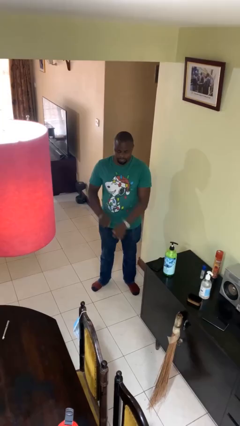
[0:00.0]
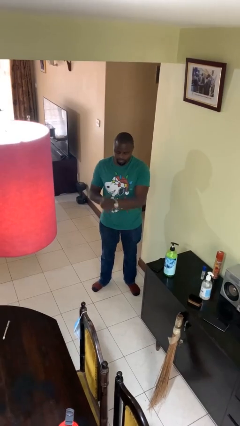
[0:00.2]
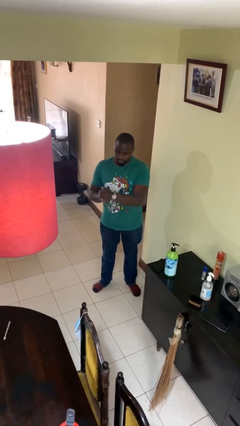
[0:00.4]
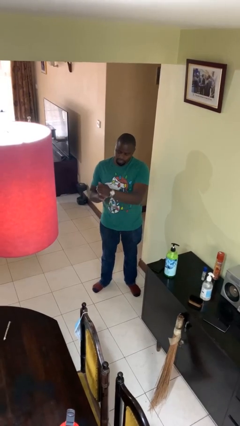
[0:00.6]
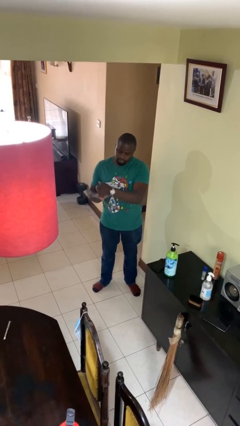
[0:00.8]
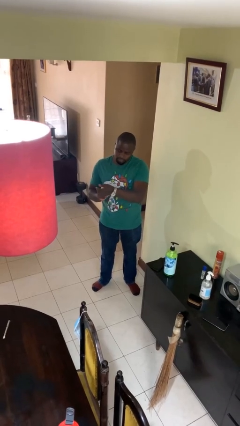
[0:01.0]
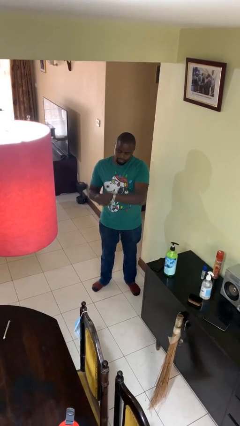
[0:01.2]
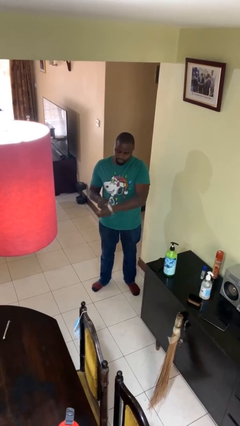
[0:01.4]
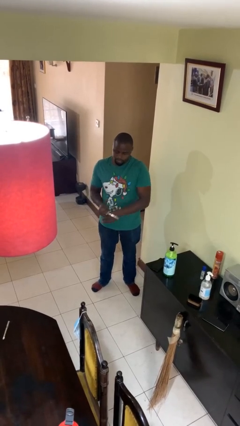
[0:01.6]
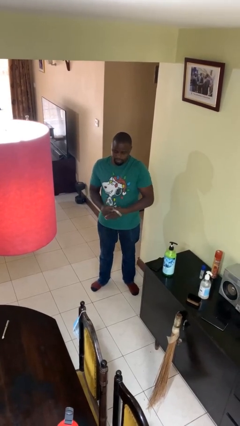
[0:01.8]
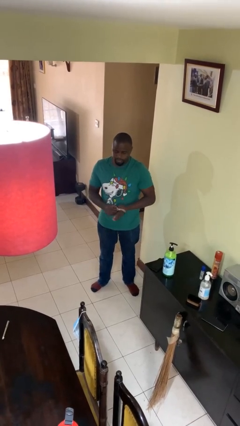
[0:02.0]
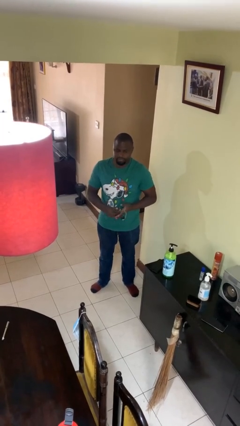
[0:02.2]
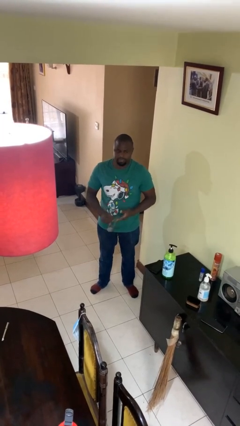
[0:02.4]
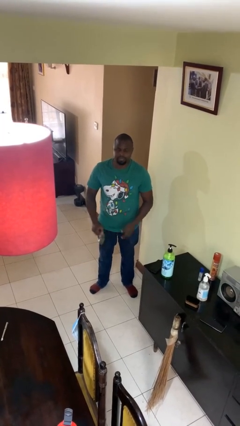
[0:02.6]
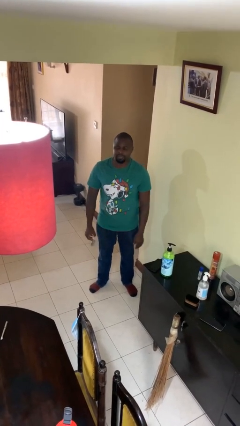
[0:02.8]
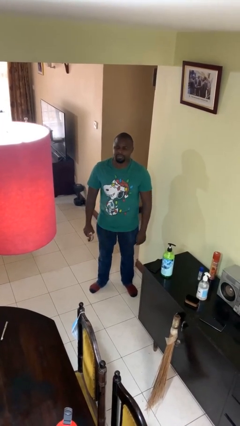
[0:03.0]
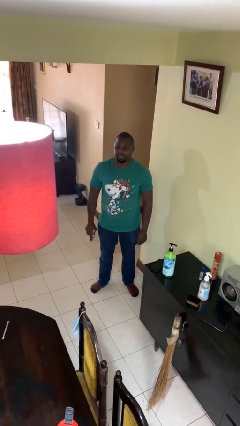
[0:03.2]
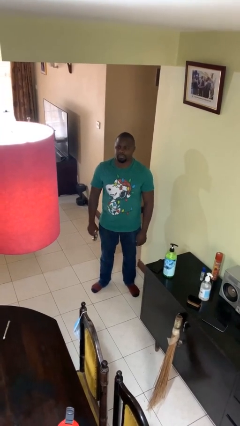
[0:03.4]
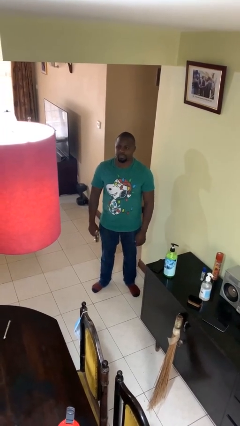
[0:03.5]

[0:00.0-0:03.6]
person takes off wristwatch

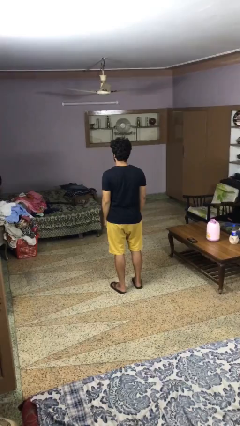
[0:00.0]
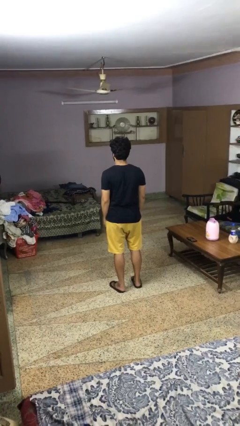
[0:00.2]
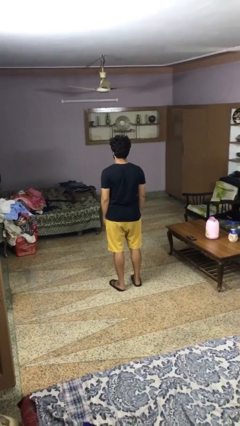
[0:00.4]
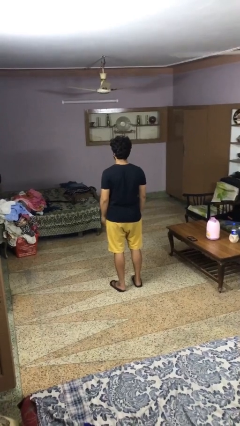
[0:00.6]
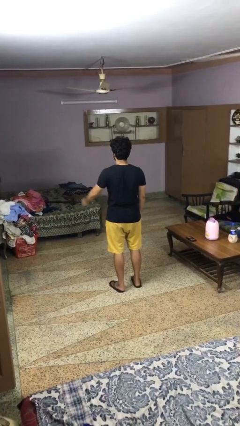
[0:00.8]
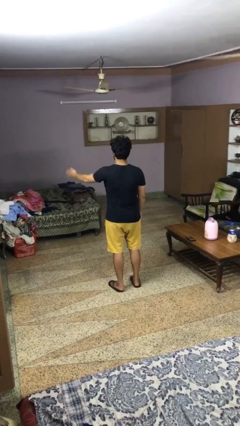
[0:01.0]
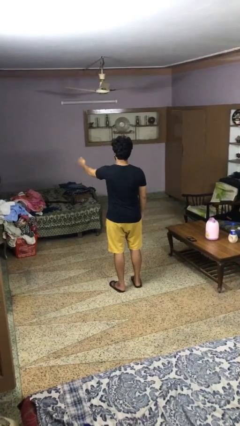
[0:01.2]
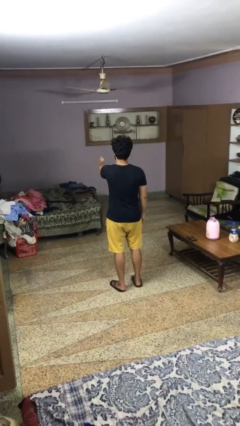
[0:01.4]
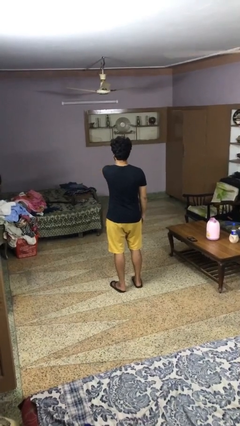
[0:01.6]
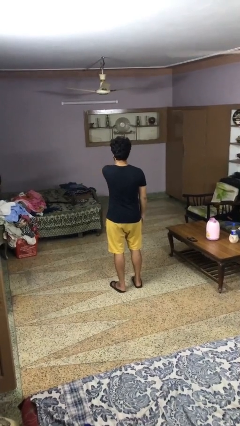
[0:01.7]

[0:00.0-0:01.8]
person gestures swipe right

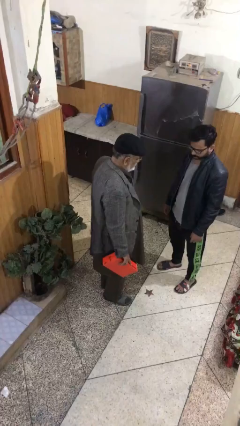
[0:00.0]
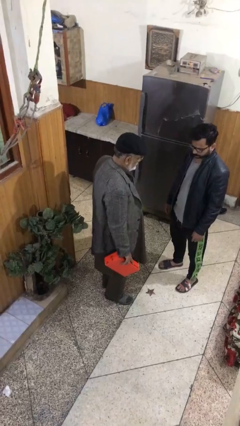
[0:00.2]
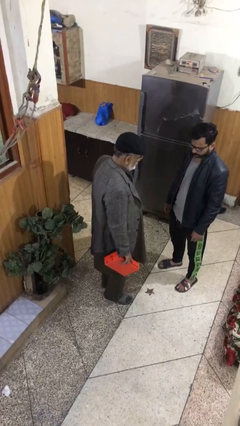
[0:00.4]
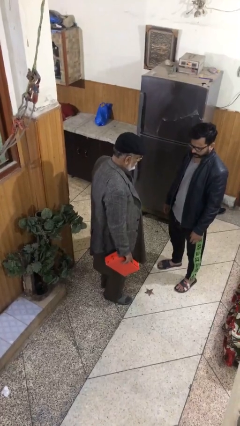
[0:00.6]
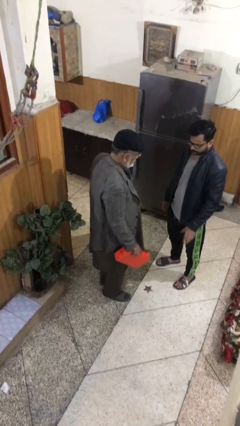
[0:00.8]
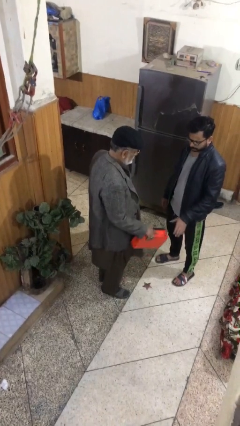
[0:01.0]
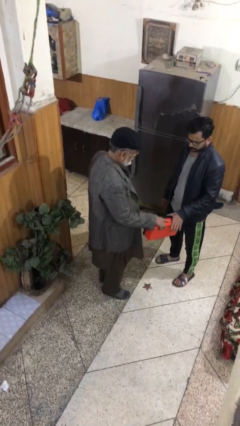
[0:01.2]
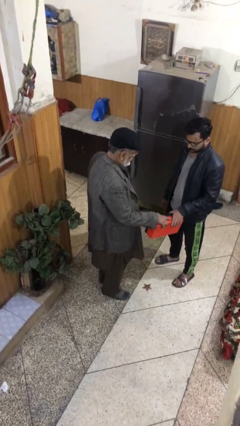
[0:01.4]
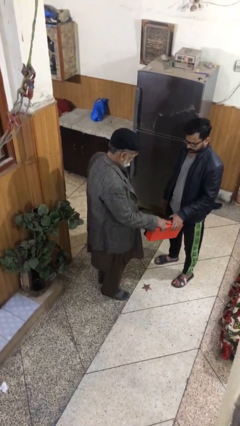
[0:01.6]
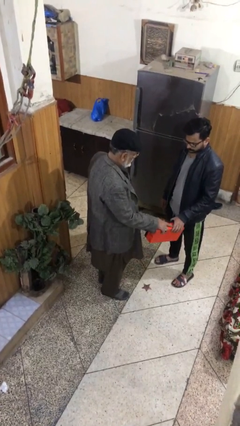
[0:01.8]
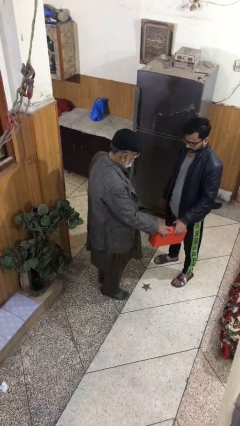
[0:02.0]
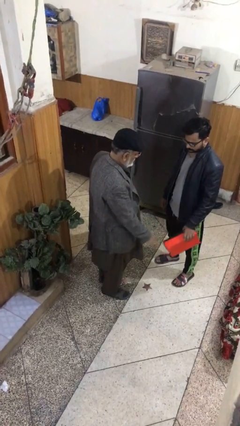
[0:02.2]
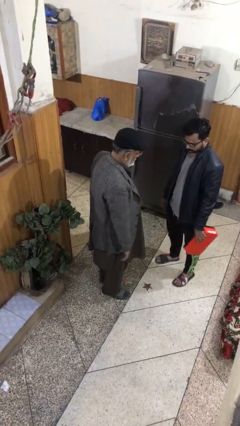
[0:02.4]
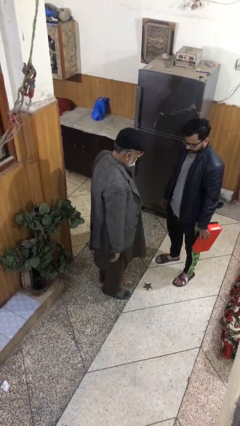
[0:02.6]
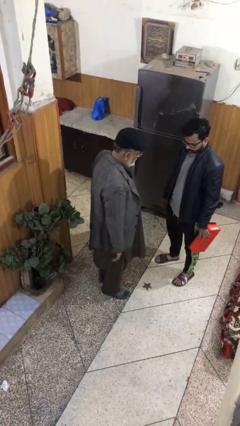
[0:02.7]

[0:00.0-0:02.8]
person transfers object to person

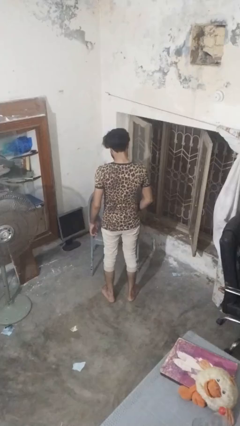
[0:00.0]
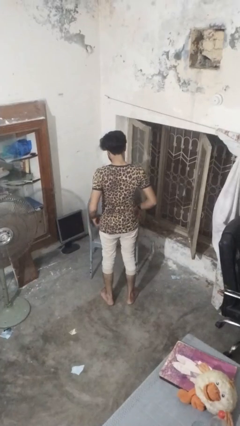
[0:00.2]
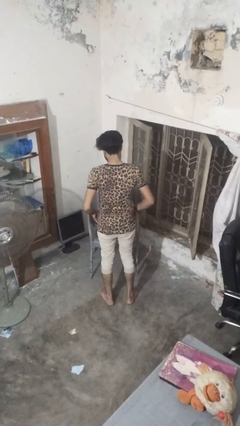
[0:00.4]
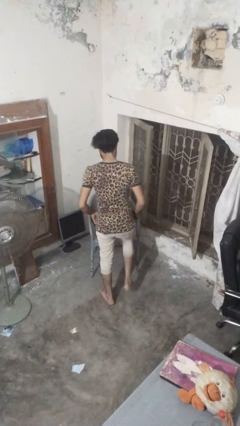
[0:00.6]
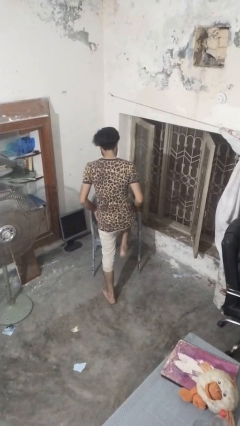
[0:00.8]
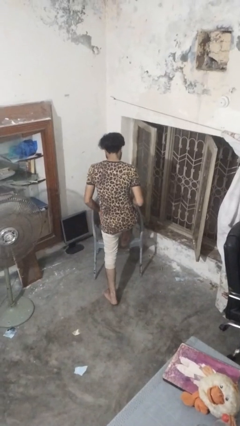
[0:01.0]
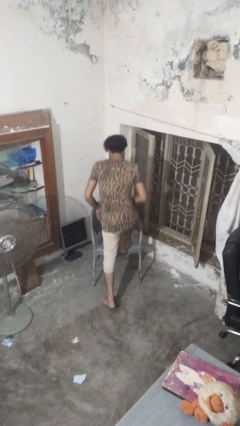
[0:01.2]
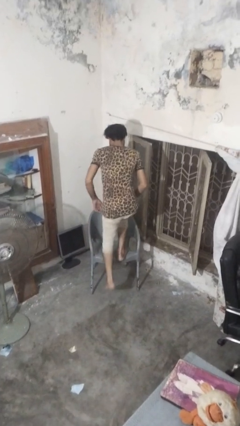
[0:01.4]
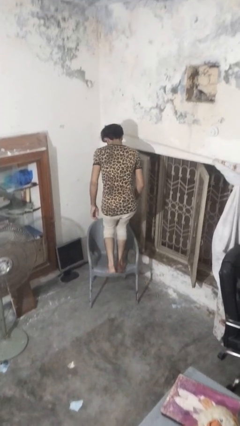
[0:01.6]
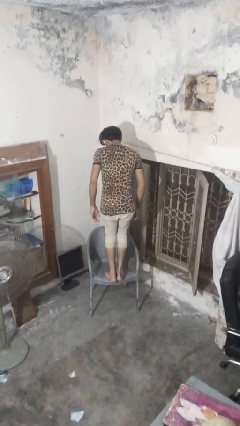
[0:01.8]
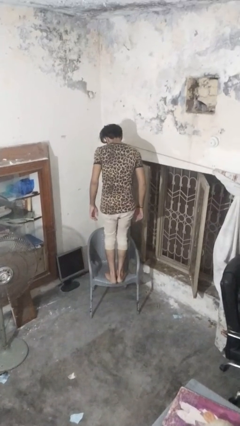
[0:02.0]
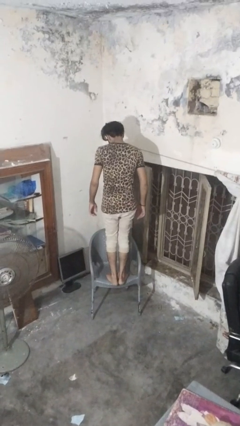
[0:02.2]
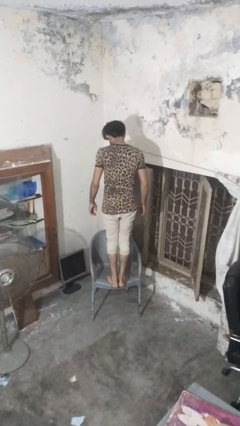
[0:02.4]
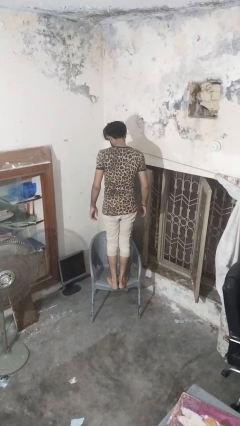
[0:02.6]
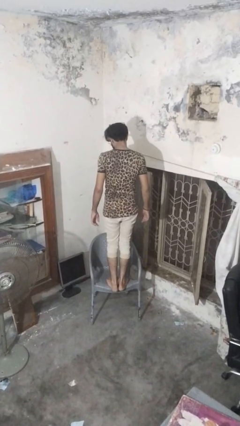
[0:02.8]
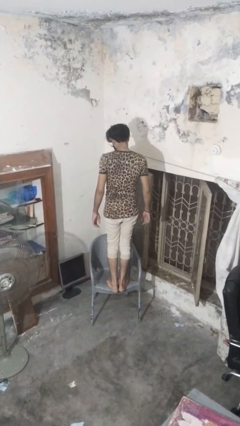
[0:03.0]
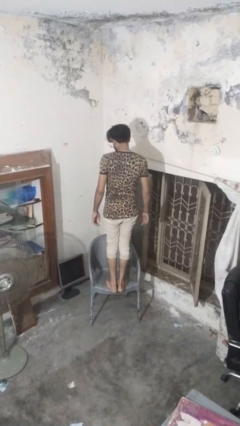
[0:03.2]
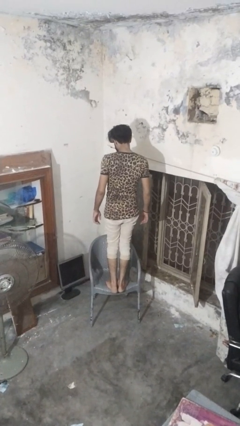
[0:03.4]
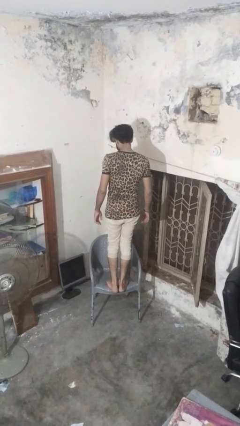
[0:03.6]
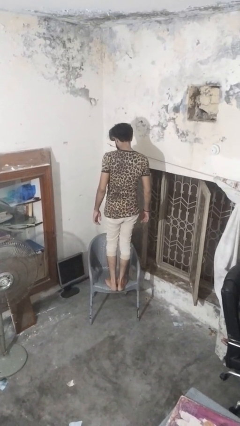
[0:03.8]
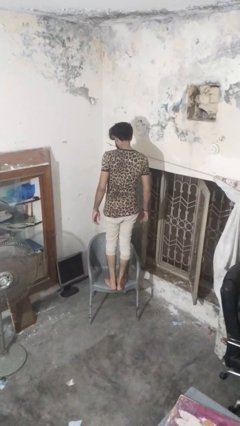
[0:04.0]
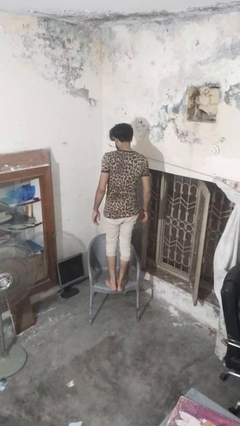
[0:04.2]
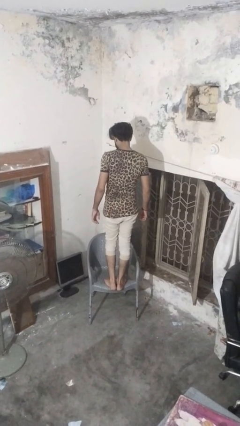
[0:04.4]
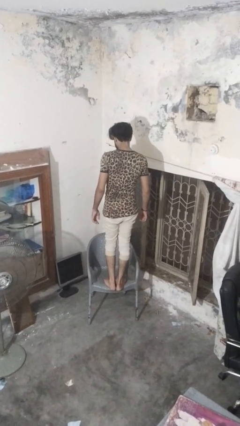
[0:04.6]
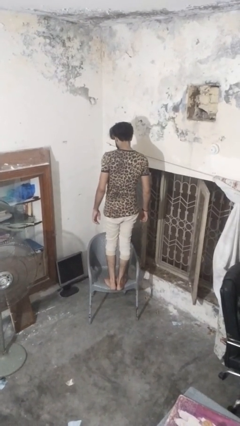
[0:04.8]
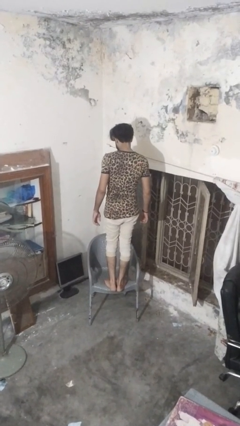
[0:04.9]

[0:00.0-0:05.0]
person climbs on chair

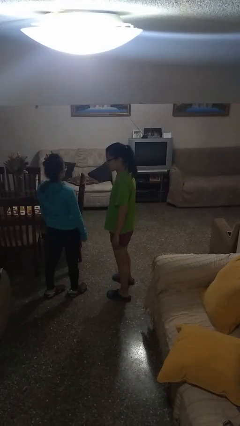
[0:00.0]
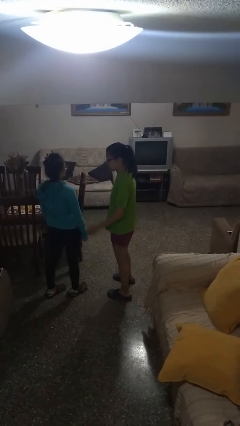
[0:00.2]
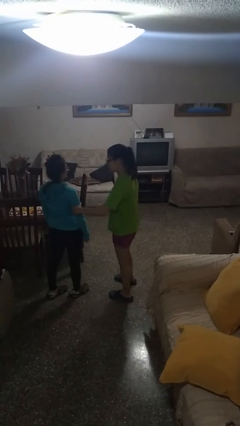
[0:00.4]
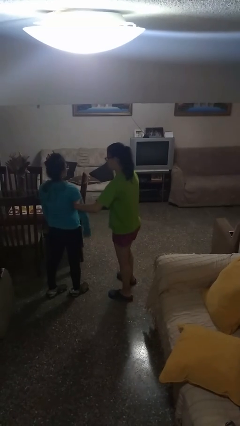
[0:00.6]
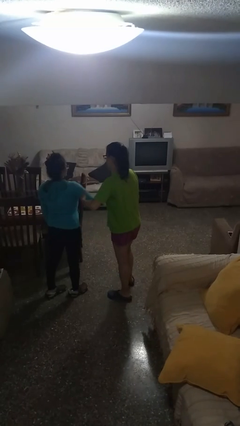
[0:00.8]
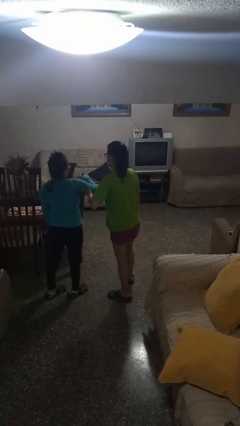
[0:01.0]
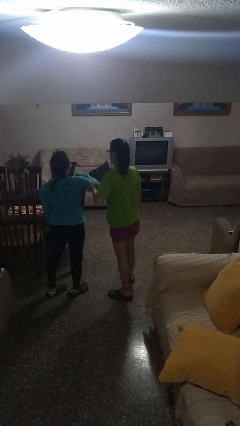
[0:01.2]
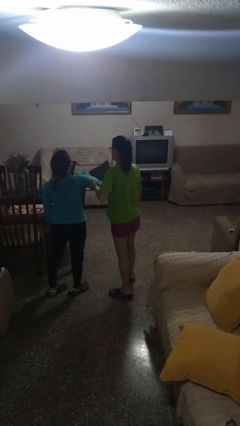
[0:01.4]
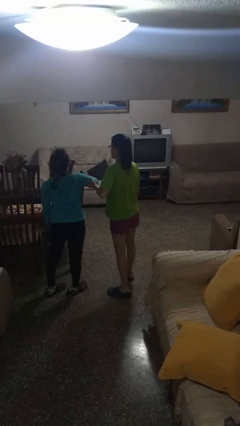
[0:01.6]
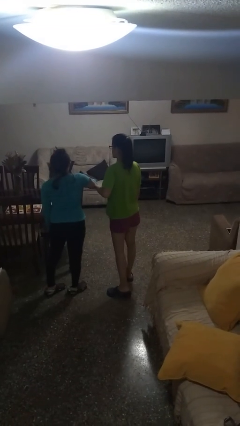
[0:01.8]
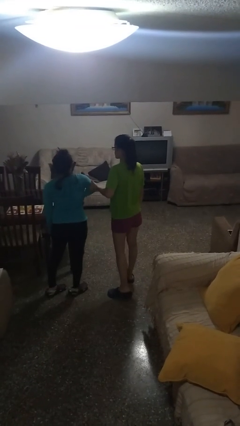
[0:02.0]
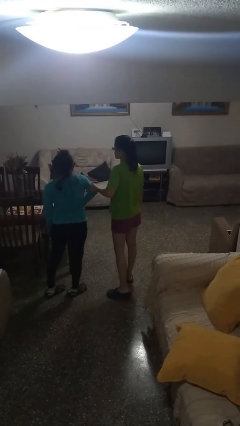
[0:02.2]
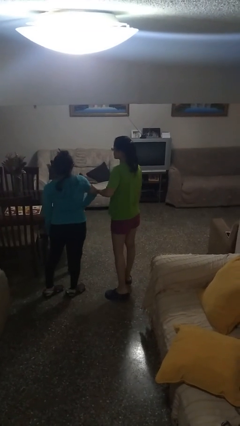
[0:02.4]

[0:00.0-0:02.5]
person grabs person by bicep

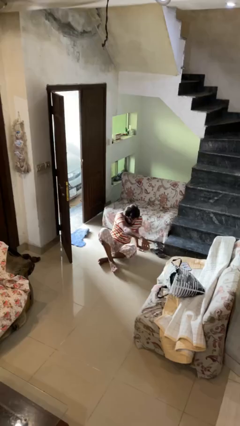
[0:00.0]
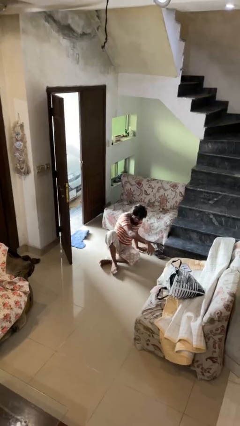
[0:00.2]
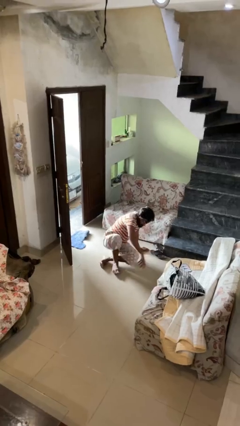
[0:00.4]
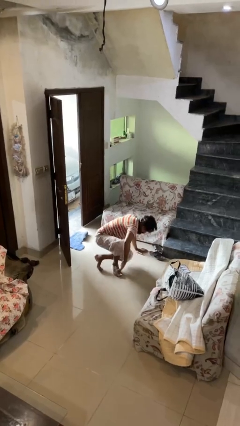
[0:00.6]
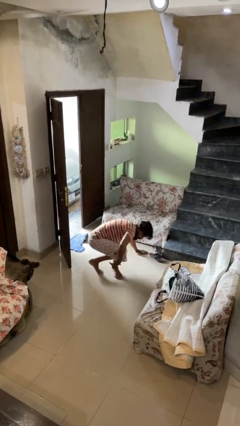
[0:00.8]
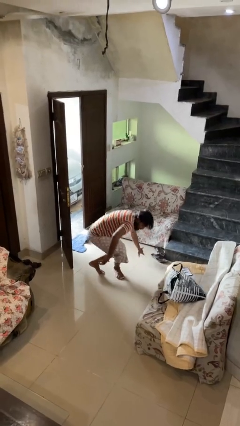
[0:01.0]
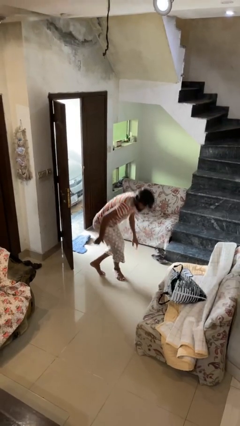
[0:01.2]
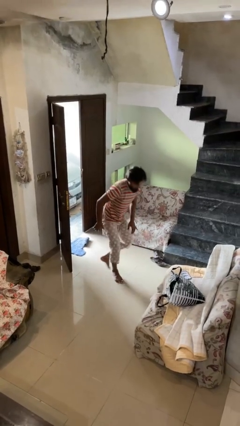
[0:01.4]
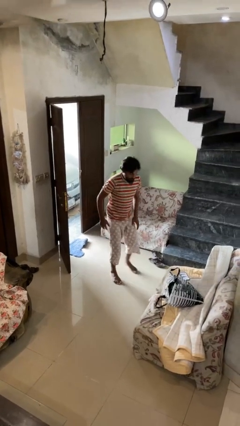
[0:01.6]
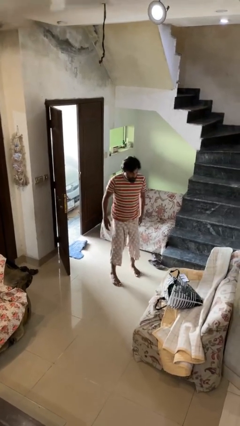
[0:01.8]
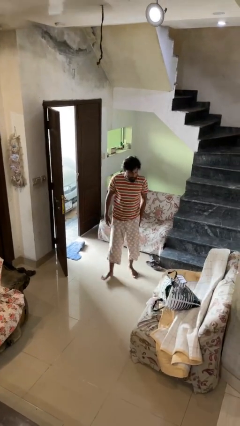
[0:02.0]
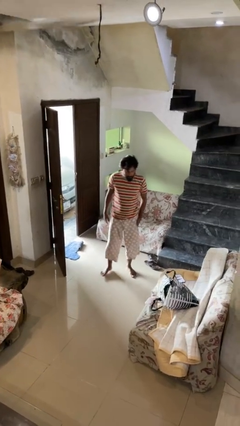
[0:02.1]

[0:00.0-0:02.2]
person stands up from floor
